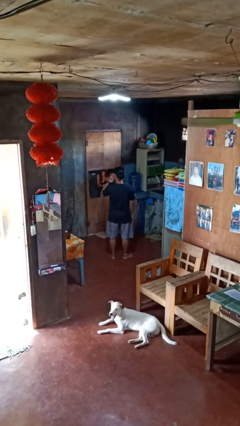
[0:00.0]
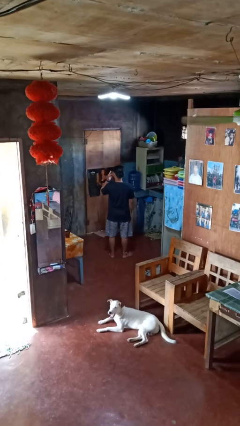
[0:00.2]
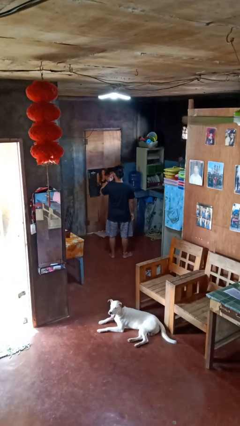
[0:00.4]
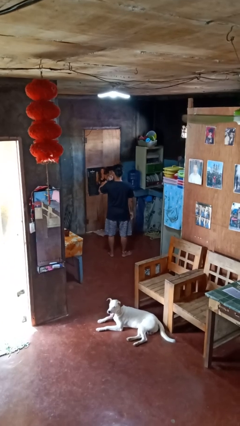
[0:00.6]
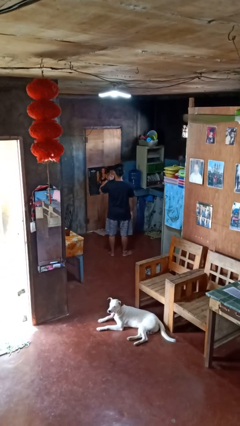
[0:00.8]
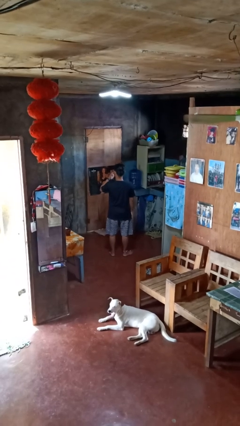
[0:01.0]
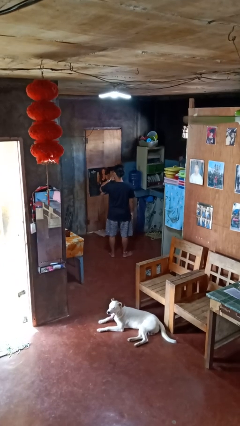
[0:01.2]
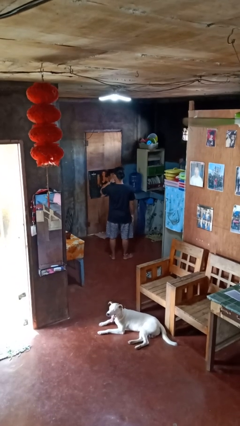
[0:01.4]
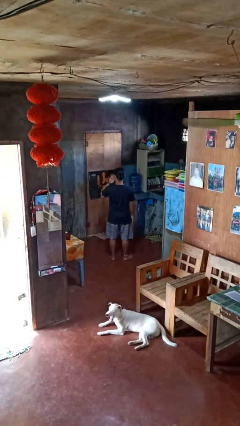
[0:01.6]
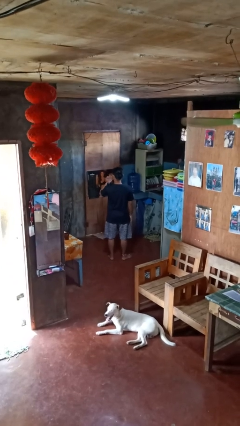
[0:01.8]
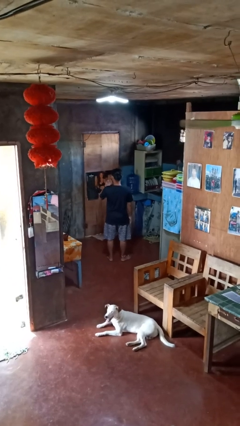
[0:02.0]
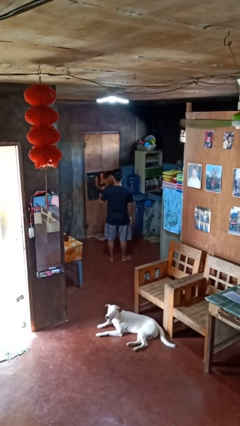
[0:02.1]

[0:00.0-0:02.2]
person licks fingers

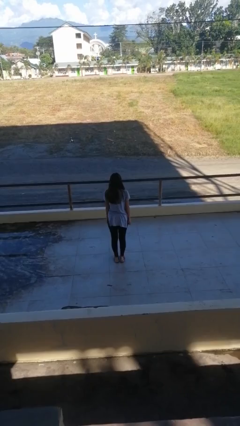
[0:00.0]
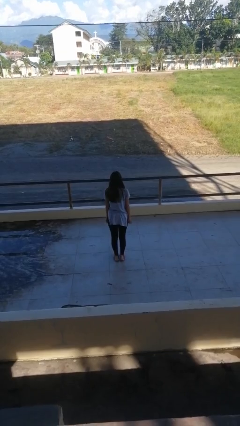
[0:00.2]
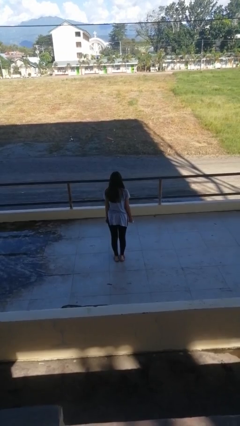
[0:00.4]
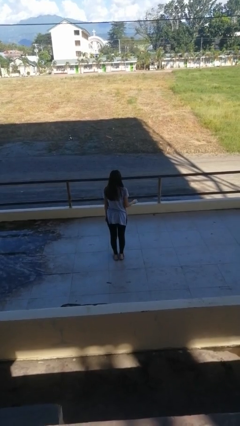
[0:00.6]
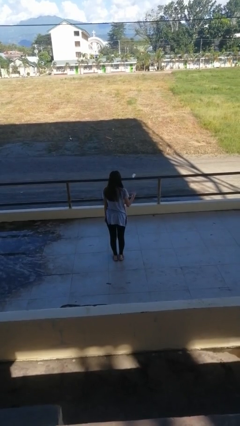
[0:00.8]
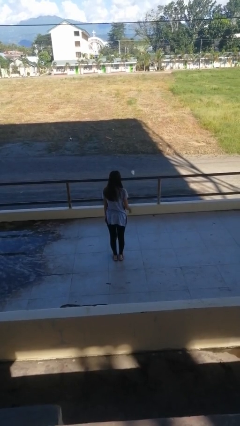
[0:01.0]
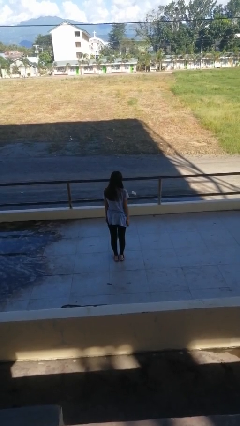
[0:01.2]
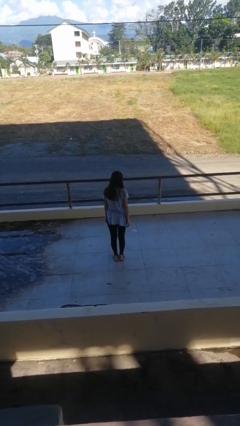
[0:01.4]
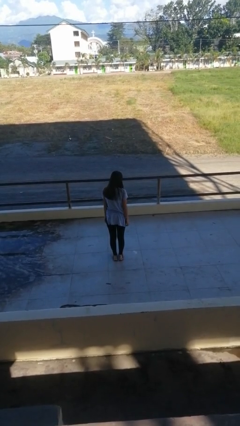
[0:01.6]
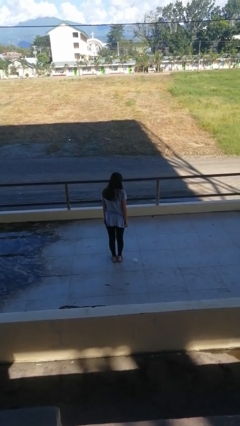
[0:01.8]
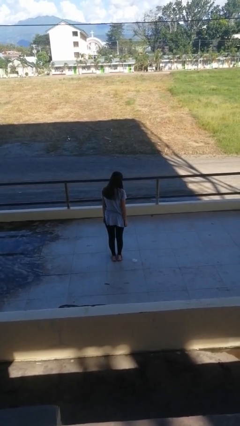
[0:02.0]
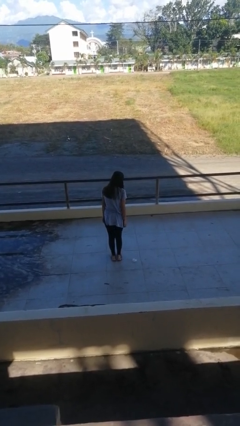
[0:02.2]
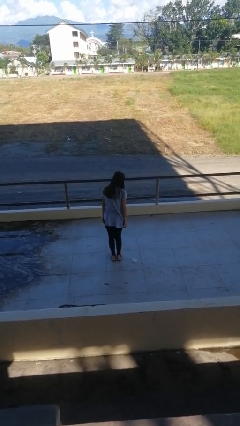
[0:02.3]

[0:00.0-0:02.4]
person throws object into air

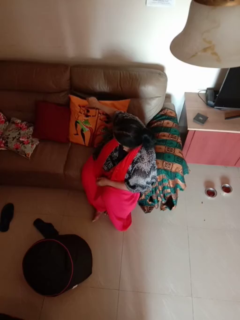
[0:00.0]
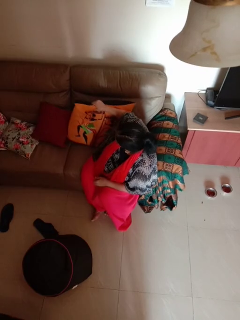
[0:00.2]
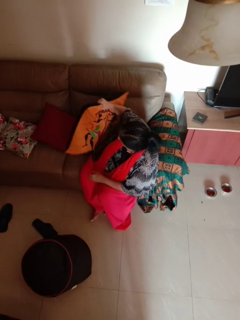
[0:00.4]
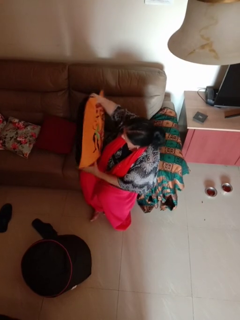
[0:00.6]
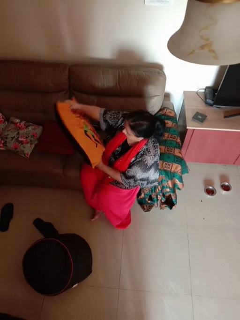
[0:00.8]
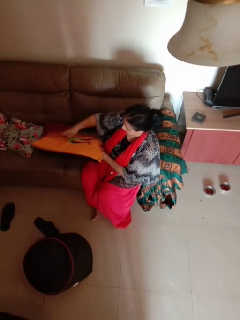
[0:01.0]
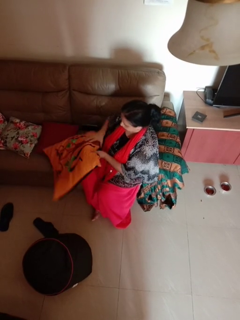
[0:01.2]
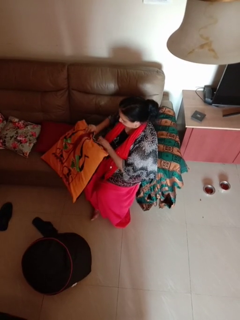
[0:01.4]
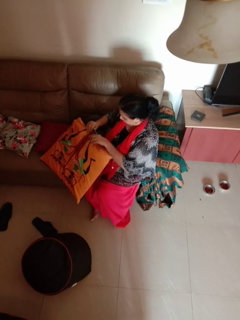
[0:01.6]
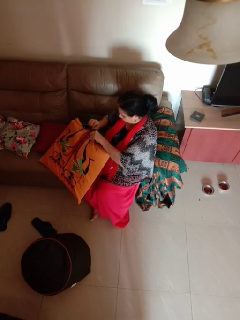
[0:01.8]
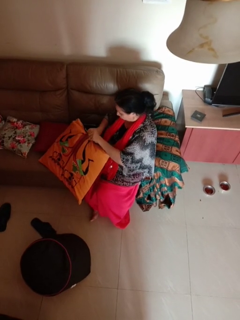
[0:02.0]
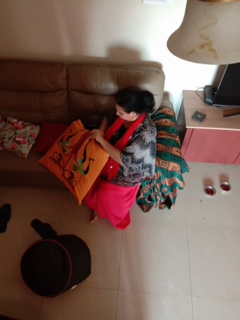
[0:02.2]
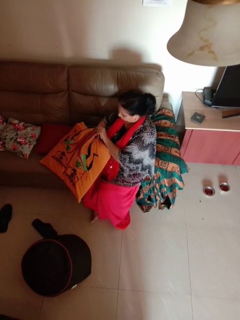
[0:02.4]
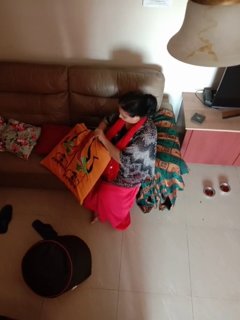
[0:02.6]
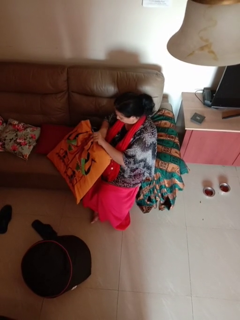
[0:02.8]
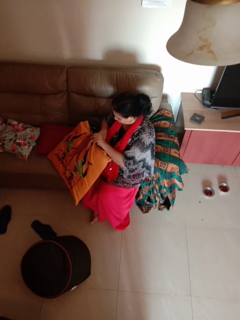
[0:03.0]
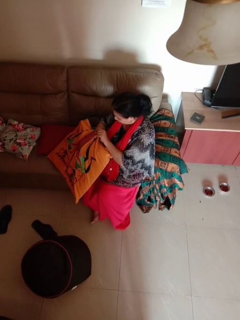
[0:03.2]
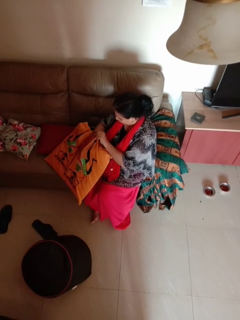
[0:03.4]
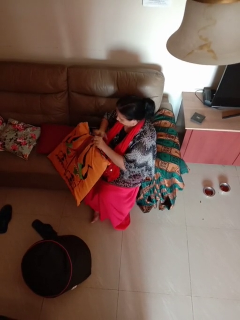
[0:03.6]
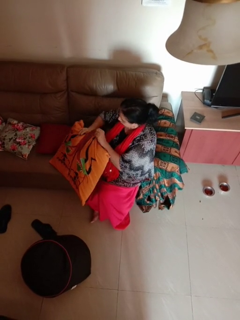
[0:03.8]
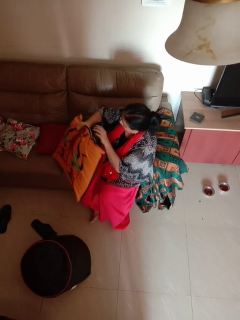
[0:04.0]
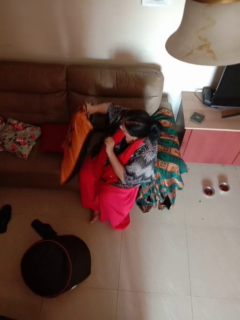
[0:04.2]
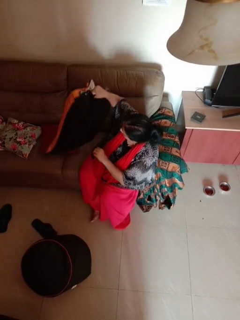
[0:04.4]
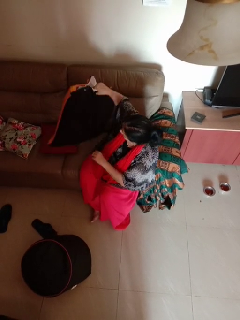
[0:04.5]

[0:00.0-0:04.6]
person searches in couch

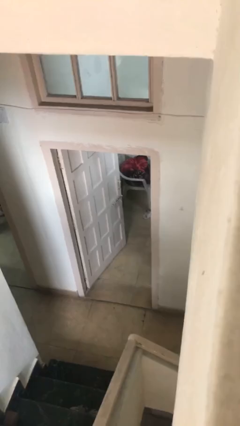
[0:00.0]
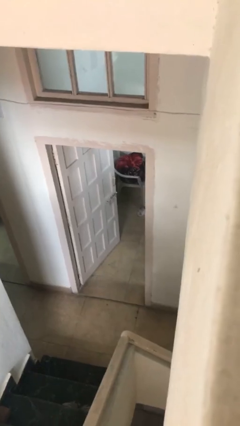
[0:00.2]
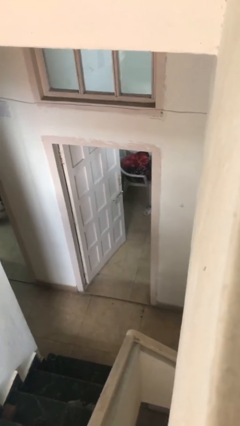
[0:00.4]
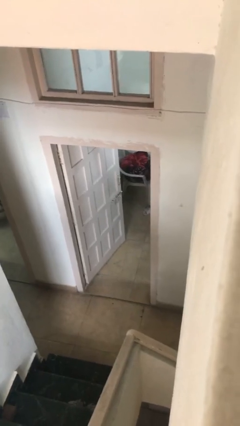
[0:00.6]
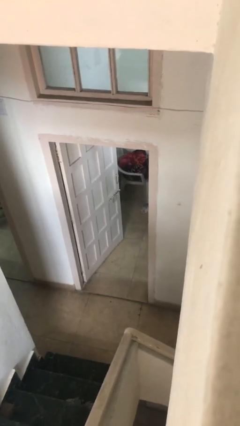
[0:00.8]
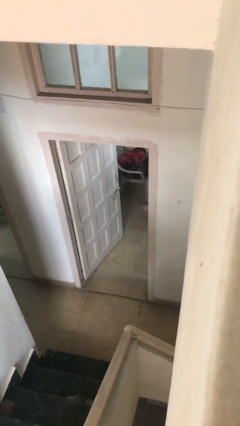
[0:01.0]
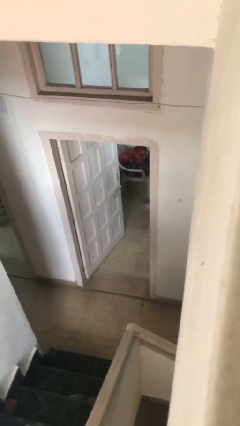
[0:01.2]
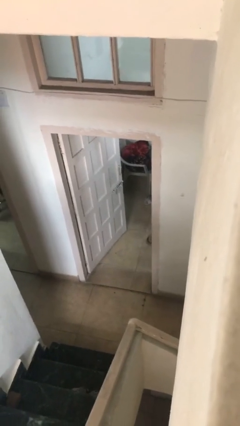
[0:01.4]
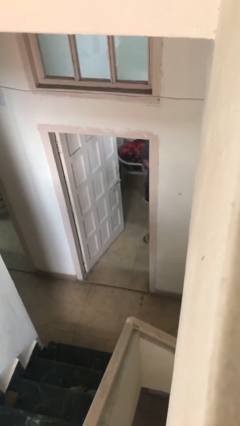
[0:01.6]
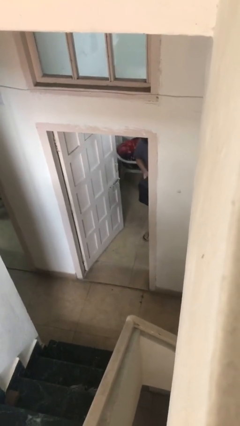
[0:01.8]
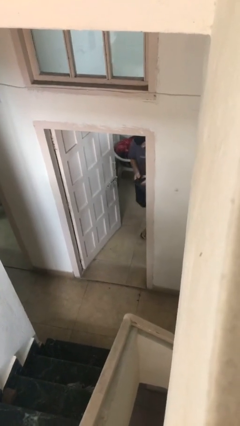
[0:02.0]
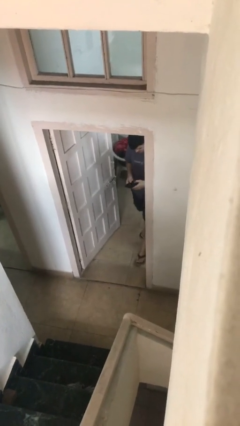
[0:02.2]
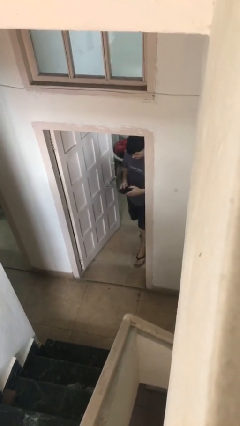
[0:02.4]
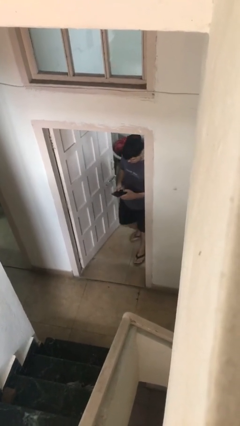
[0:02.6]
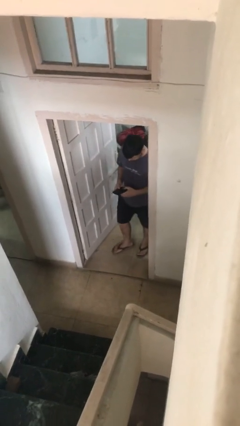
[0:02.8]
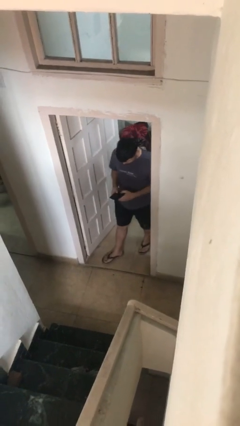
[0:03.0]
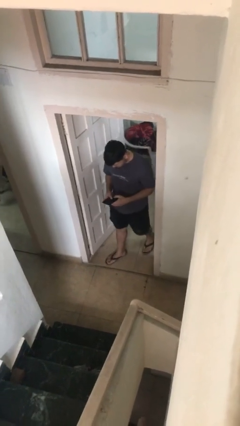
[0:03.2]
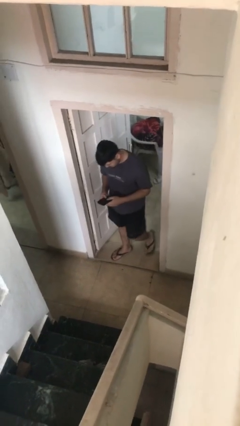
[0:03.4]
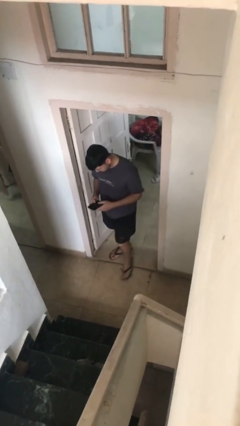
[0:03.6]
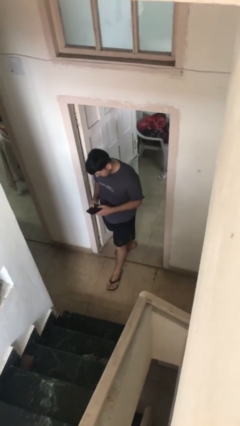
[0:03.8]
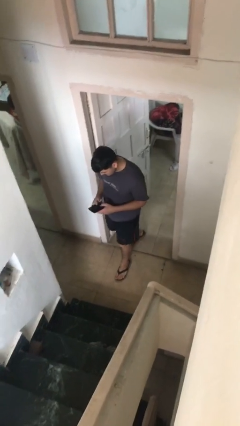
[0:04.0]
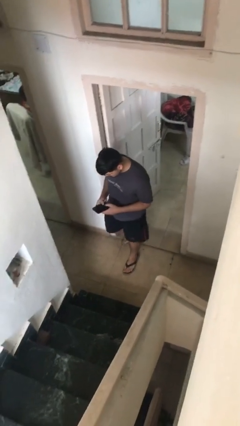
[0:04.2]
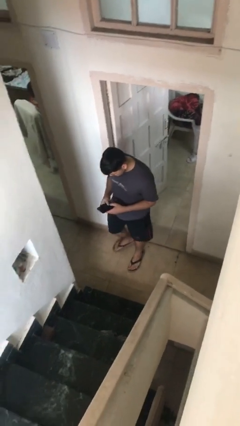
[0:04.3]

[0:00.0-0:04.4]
person enters scene through structure

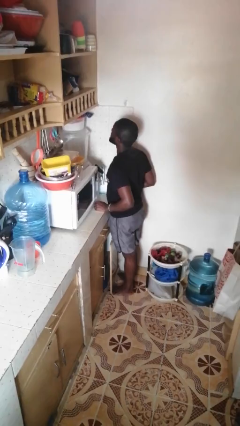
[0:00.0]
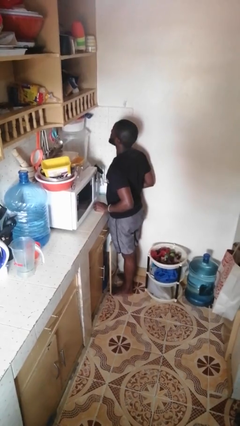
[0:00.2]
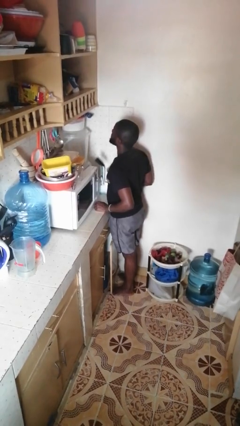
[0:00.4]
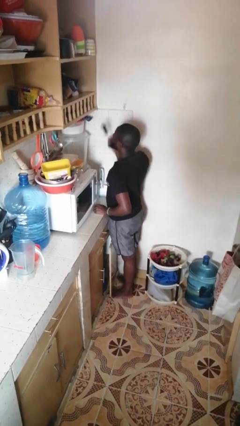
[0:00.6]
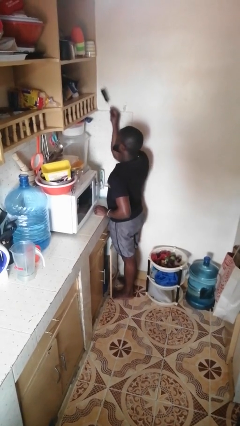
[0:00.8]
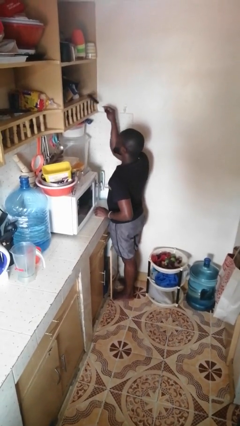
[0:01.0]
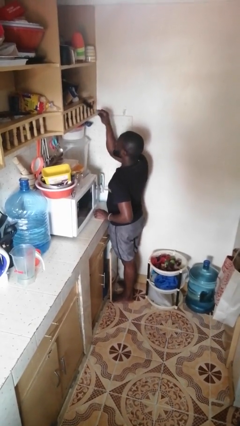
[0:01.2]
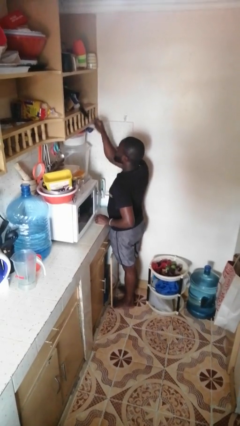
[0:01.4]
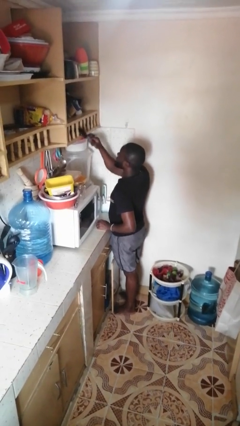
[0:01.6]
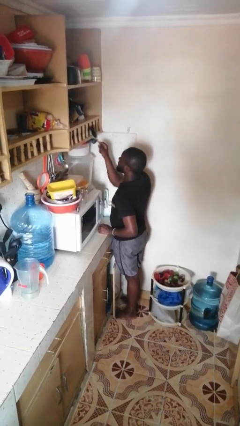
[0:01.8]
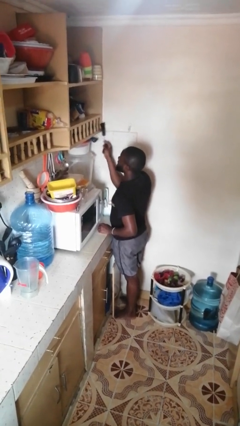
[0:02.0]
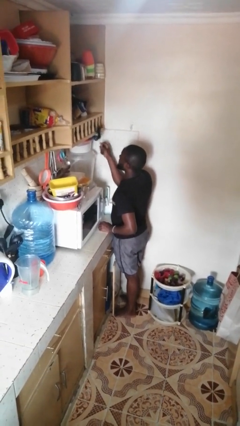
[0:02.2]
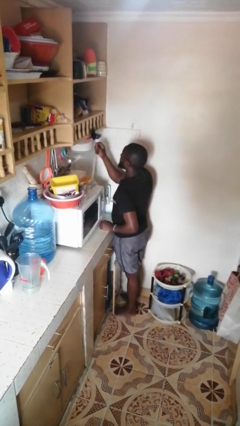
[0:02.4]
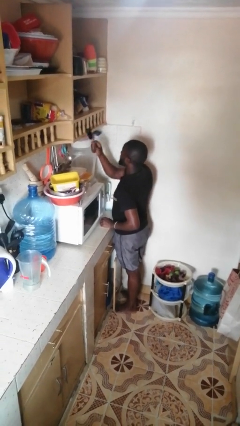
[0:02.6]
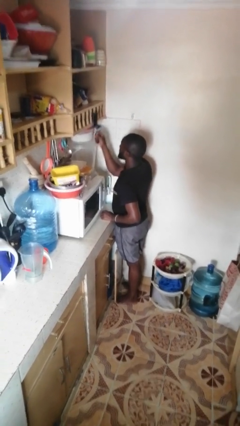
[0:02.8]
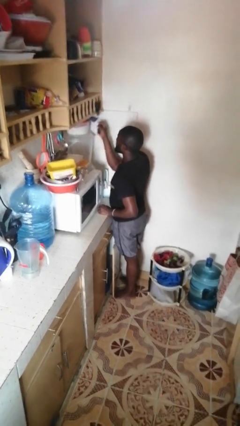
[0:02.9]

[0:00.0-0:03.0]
person dusts furniture

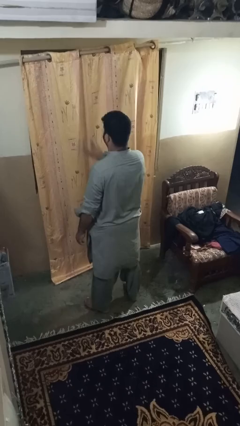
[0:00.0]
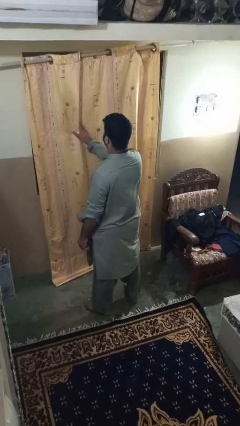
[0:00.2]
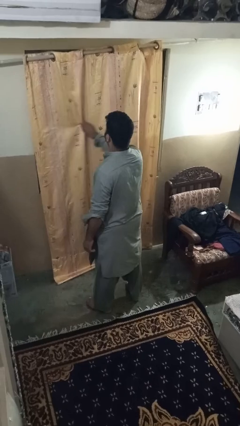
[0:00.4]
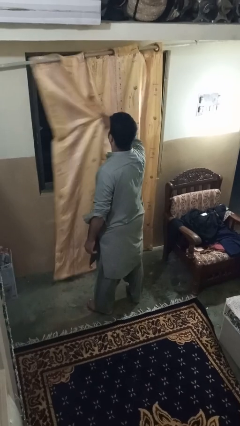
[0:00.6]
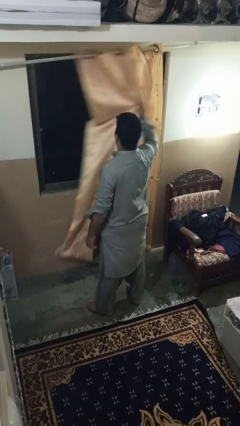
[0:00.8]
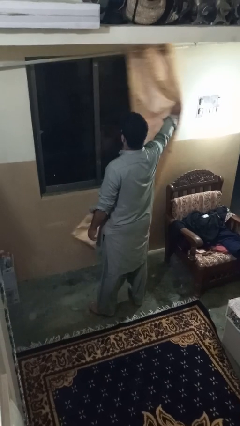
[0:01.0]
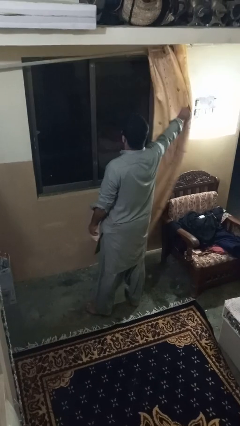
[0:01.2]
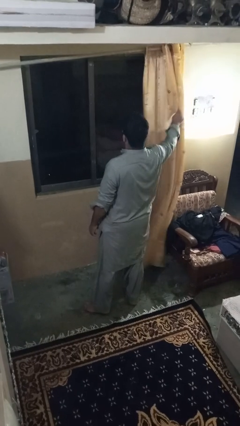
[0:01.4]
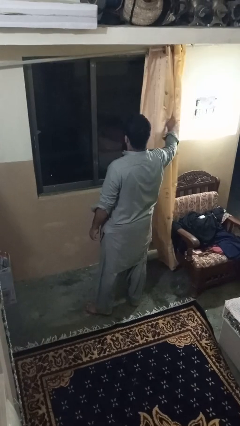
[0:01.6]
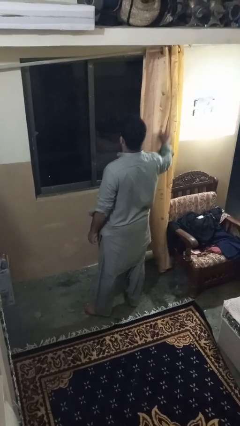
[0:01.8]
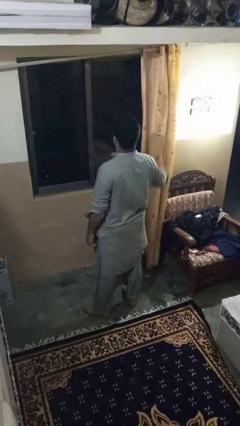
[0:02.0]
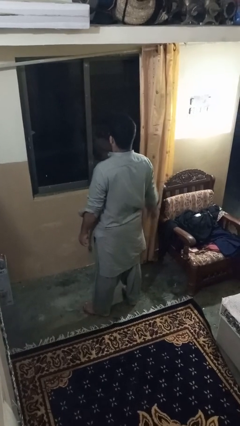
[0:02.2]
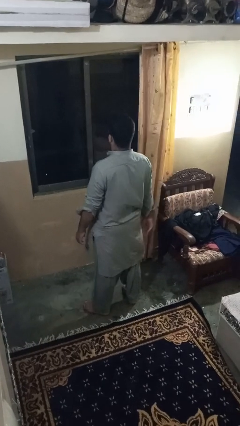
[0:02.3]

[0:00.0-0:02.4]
person closes curtains
